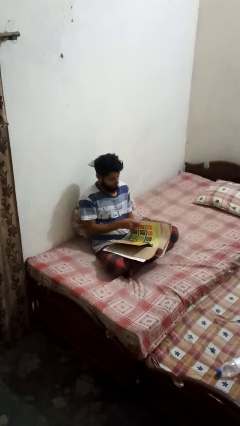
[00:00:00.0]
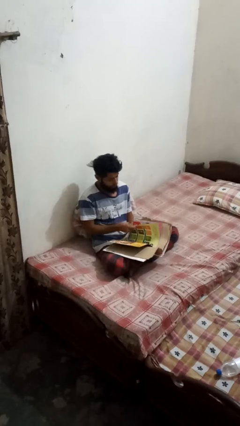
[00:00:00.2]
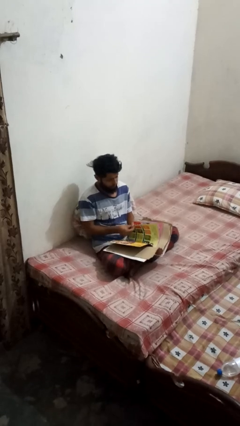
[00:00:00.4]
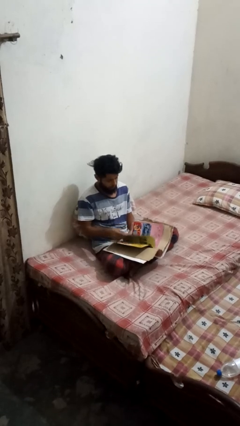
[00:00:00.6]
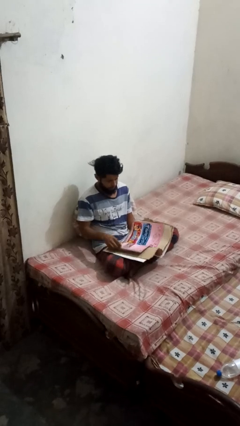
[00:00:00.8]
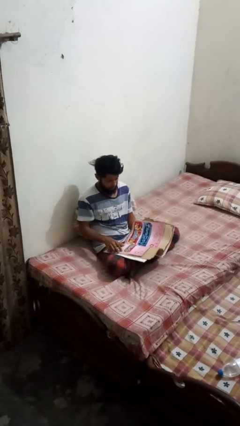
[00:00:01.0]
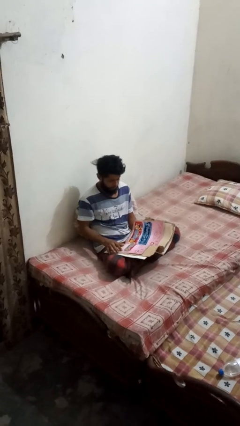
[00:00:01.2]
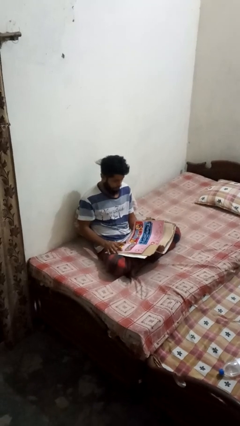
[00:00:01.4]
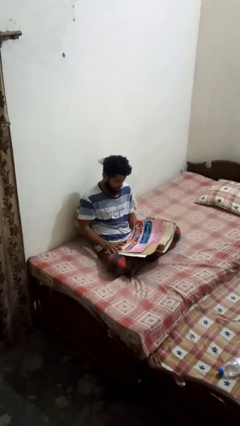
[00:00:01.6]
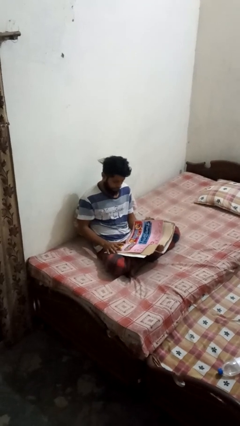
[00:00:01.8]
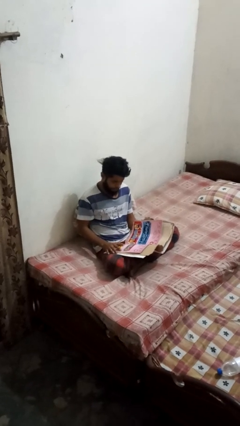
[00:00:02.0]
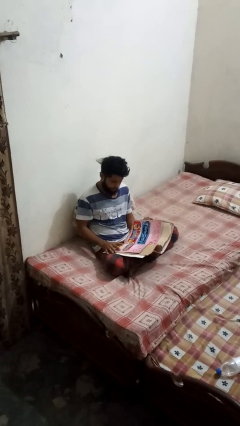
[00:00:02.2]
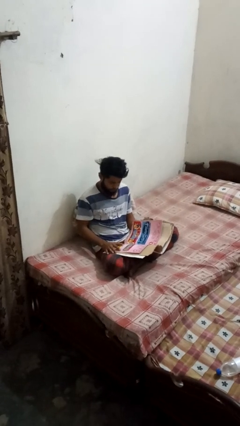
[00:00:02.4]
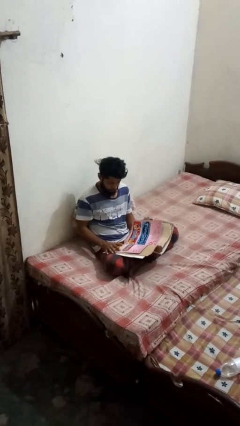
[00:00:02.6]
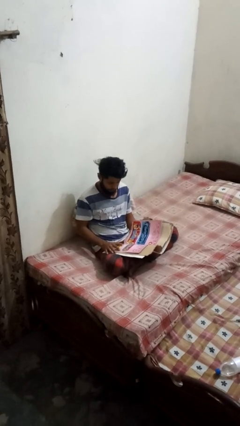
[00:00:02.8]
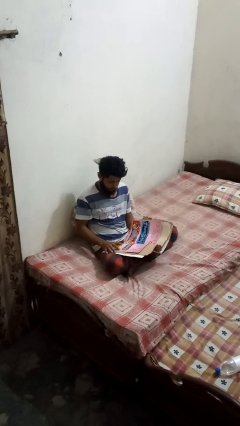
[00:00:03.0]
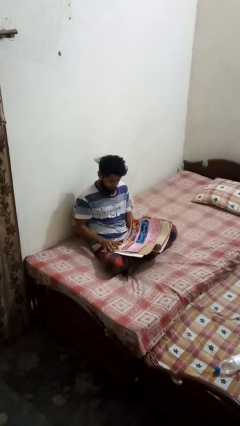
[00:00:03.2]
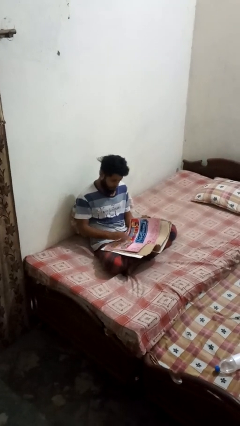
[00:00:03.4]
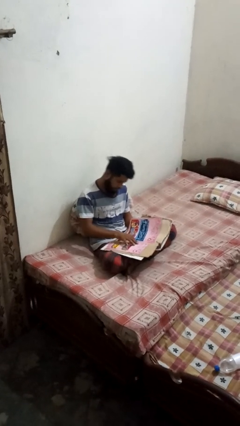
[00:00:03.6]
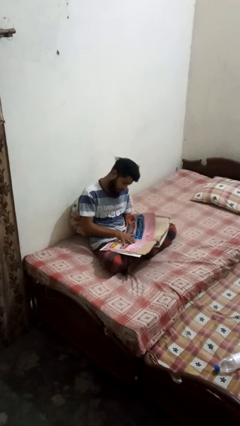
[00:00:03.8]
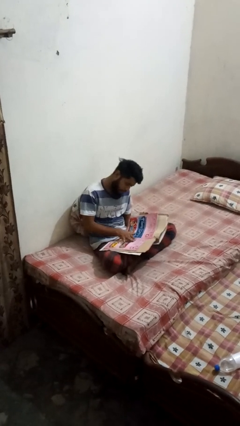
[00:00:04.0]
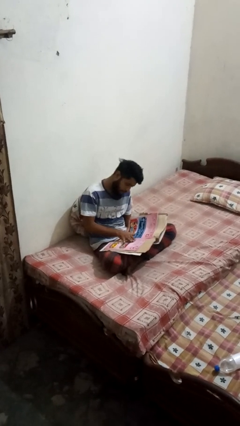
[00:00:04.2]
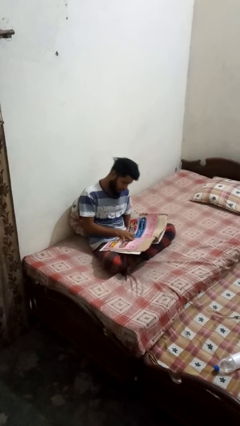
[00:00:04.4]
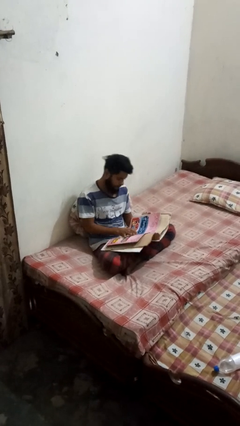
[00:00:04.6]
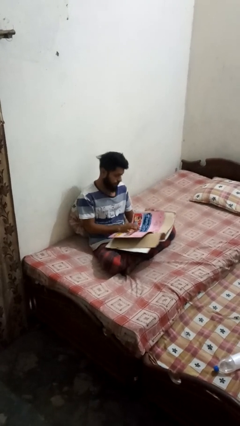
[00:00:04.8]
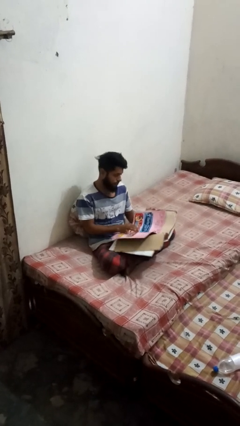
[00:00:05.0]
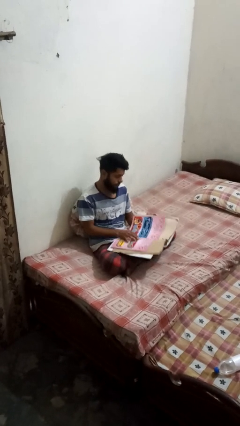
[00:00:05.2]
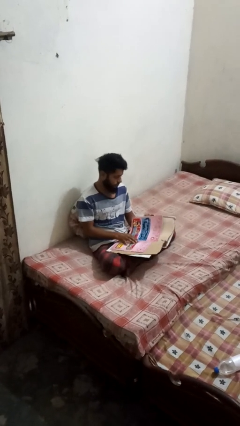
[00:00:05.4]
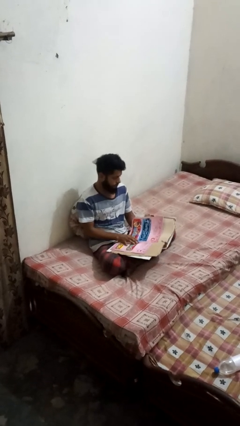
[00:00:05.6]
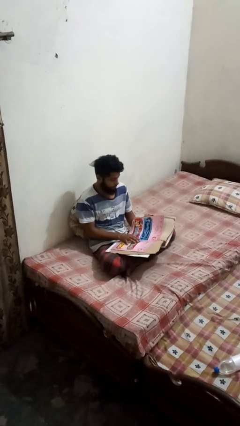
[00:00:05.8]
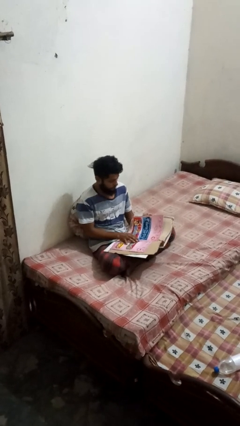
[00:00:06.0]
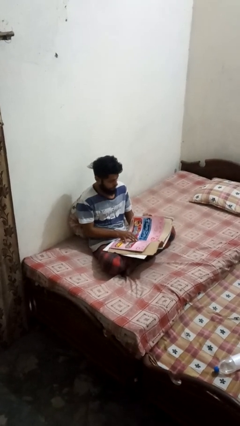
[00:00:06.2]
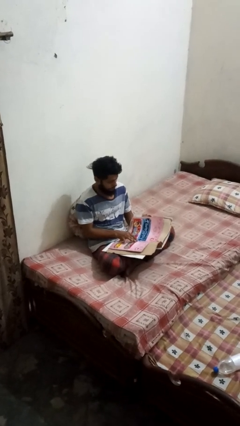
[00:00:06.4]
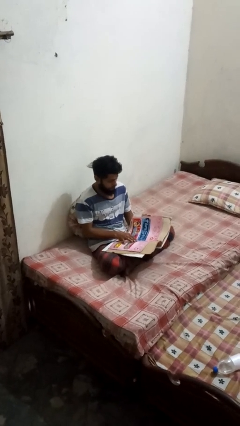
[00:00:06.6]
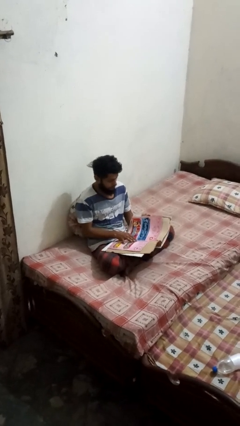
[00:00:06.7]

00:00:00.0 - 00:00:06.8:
person reads magazine

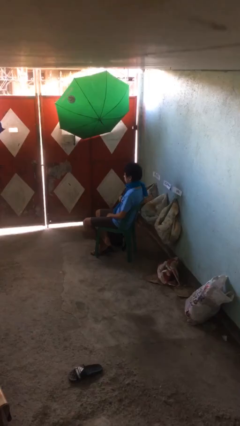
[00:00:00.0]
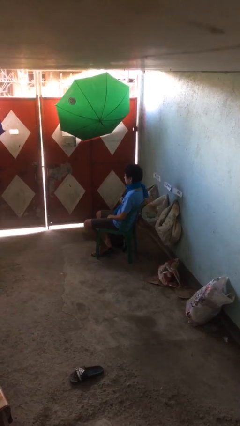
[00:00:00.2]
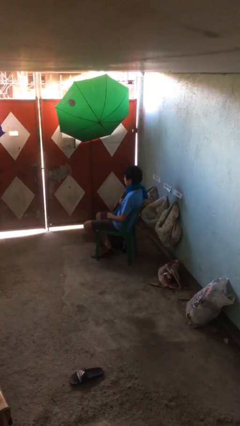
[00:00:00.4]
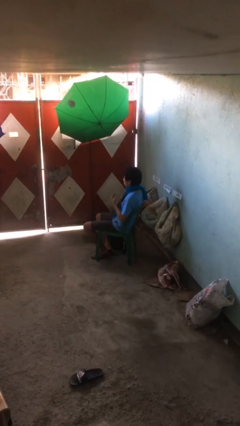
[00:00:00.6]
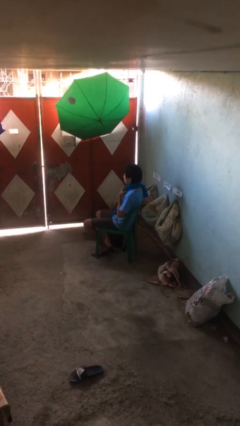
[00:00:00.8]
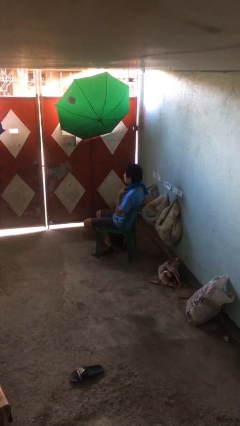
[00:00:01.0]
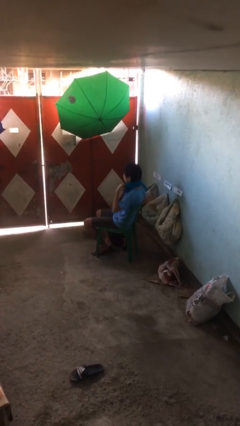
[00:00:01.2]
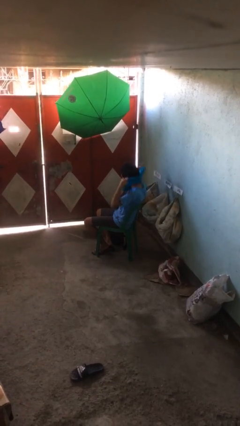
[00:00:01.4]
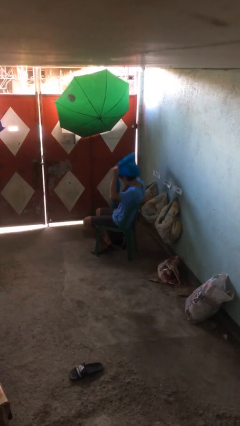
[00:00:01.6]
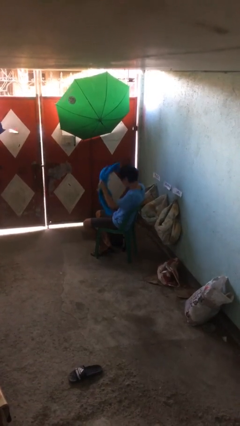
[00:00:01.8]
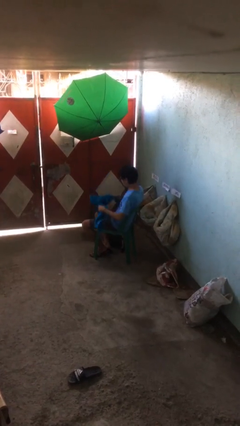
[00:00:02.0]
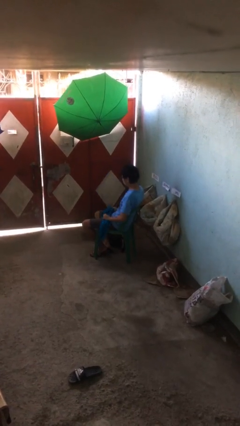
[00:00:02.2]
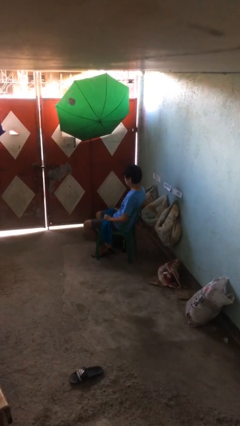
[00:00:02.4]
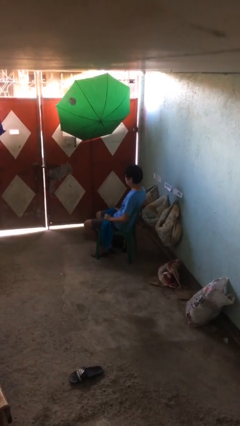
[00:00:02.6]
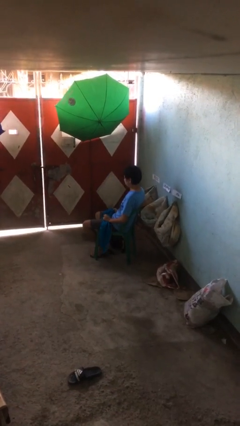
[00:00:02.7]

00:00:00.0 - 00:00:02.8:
person takes off scarf

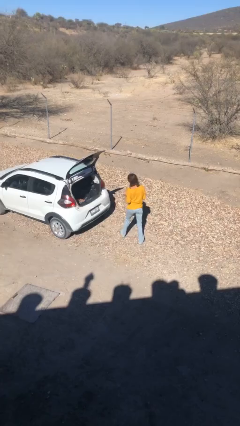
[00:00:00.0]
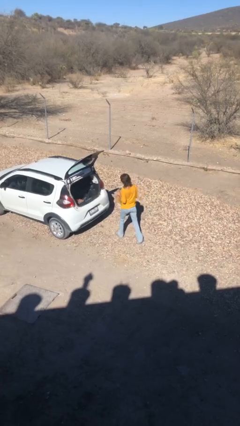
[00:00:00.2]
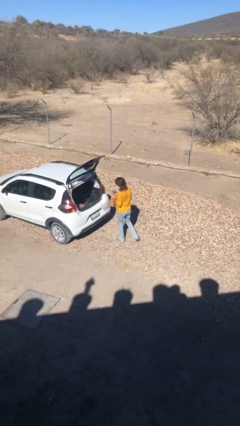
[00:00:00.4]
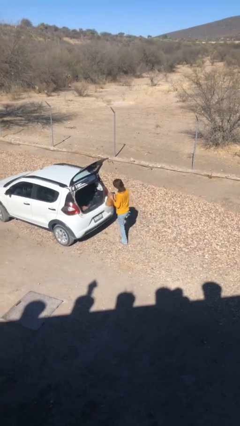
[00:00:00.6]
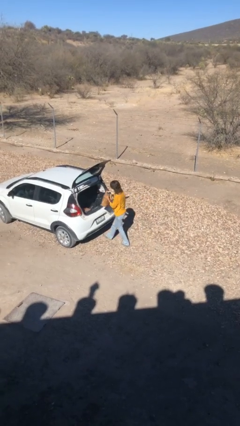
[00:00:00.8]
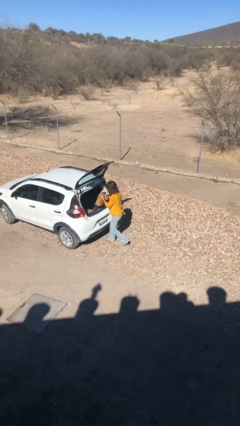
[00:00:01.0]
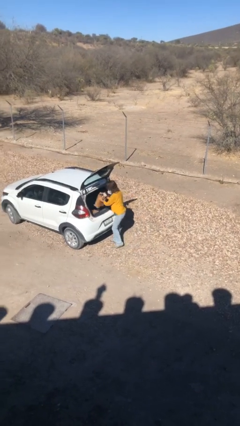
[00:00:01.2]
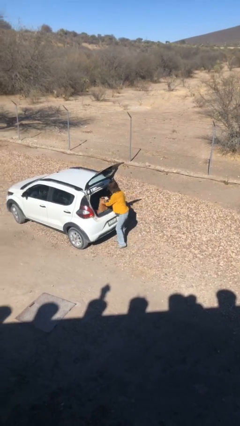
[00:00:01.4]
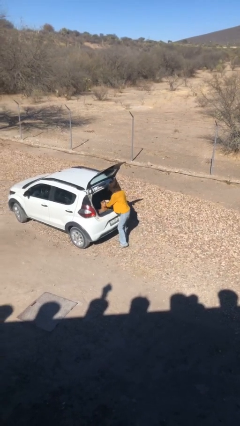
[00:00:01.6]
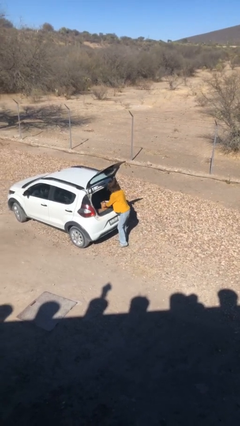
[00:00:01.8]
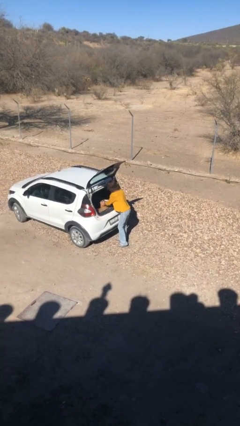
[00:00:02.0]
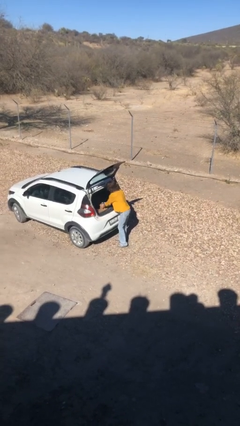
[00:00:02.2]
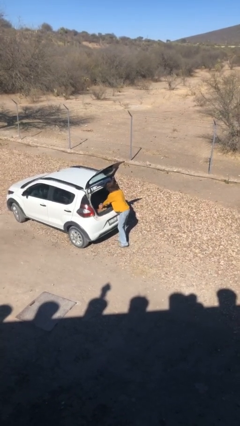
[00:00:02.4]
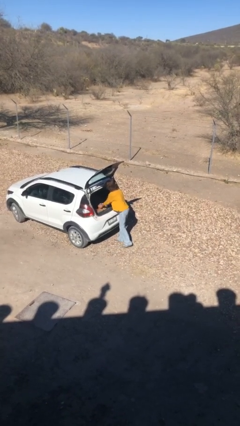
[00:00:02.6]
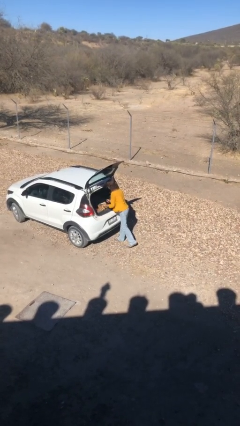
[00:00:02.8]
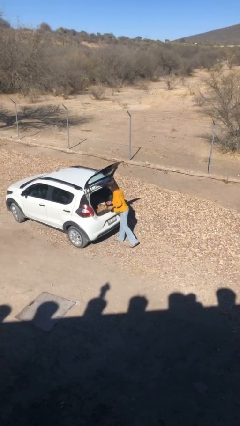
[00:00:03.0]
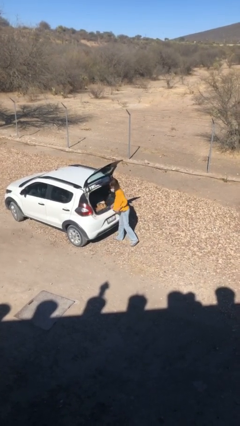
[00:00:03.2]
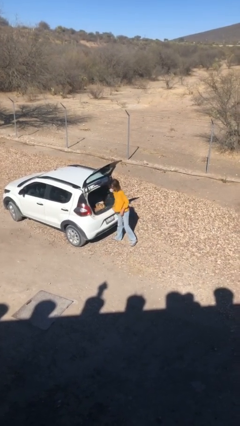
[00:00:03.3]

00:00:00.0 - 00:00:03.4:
person loads car

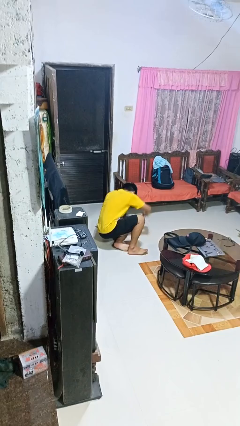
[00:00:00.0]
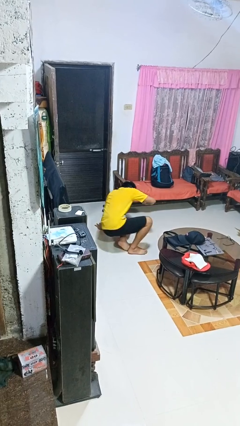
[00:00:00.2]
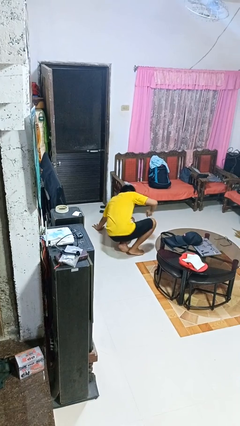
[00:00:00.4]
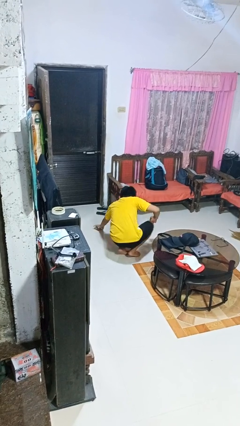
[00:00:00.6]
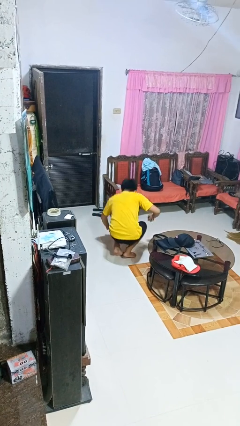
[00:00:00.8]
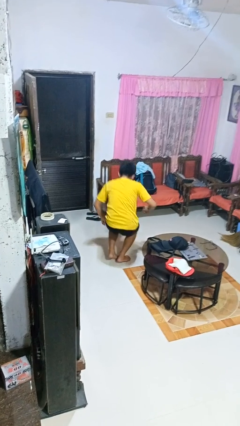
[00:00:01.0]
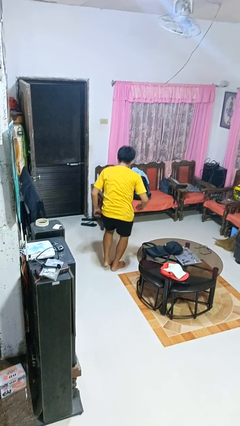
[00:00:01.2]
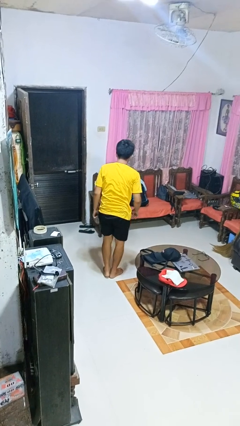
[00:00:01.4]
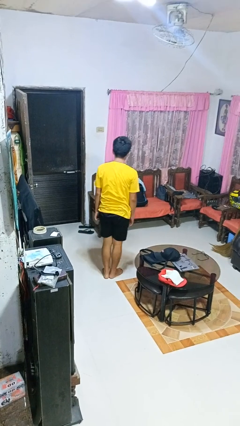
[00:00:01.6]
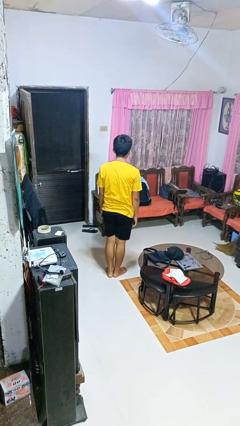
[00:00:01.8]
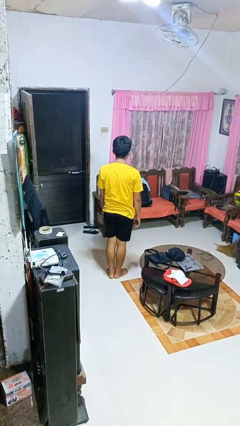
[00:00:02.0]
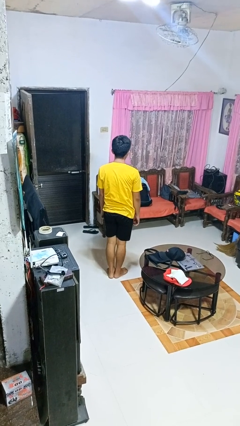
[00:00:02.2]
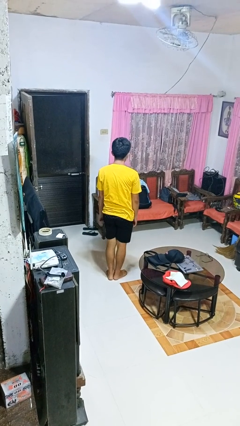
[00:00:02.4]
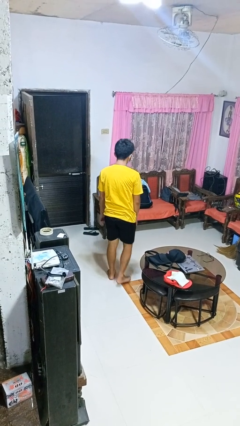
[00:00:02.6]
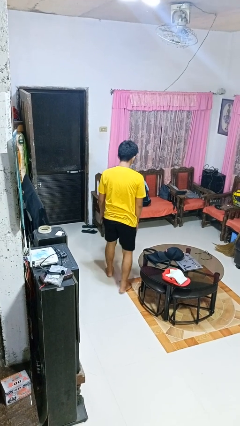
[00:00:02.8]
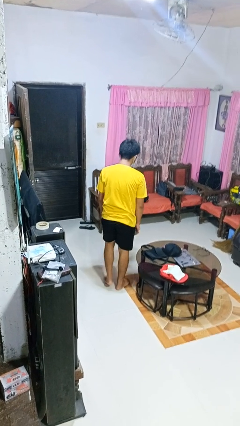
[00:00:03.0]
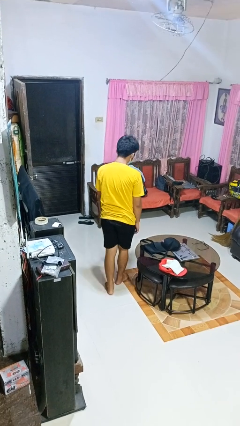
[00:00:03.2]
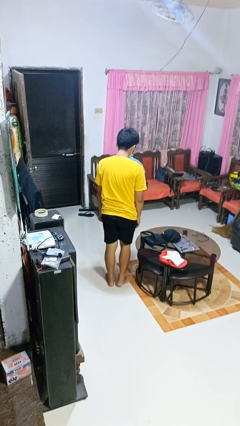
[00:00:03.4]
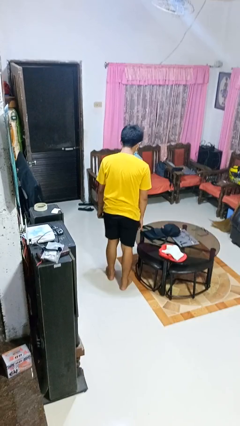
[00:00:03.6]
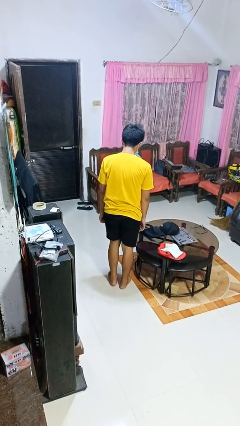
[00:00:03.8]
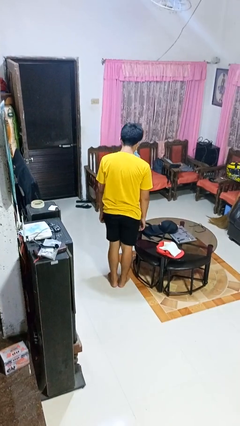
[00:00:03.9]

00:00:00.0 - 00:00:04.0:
person stands up from floor

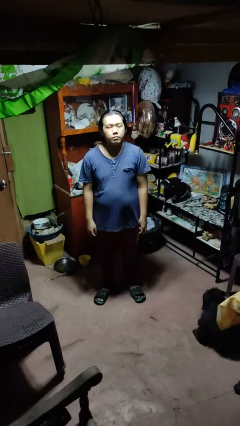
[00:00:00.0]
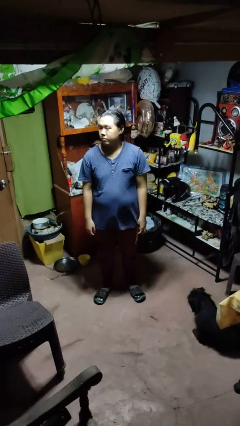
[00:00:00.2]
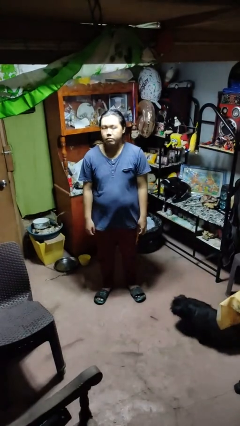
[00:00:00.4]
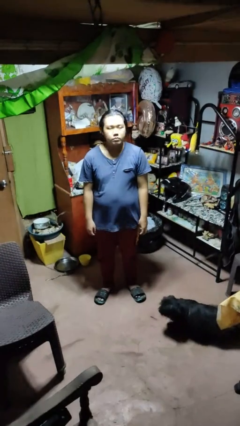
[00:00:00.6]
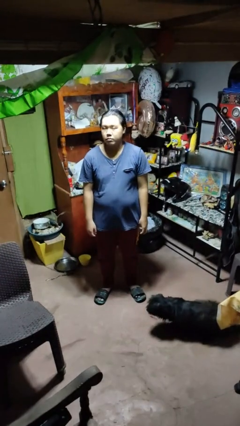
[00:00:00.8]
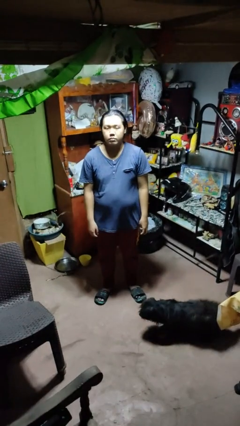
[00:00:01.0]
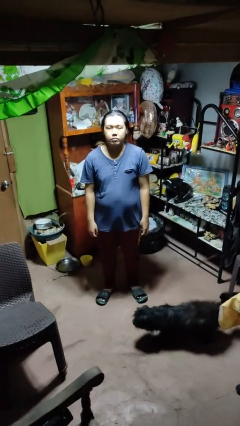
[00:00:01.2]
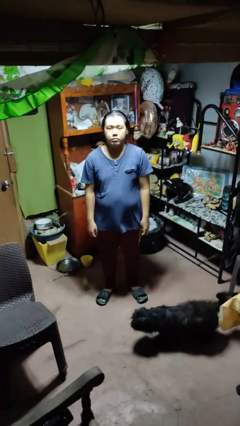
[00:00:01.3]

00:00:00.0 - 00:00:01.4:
person shakes head
